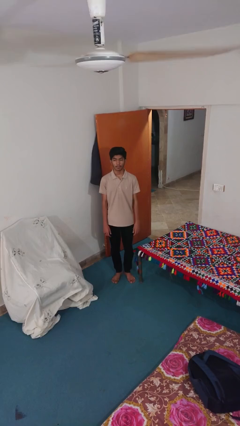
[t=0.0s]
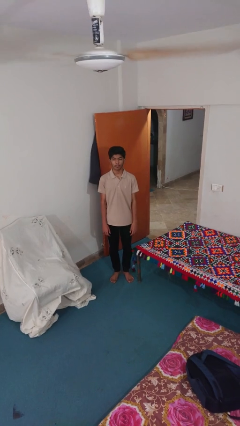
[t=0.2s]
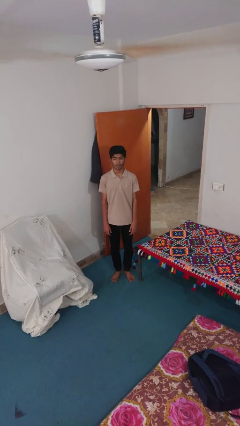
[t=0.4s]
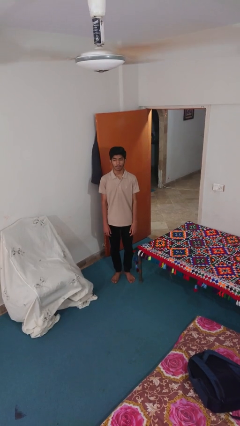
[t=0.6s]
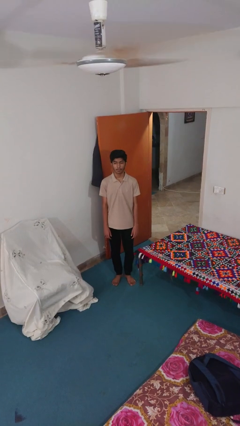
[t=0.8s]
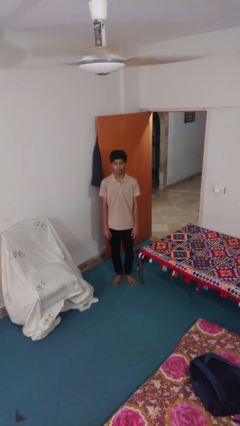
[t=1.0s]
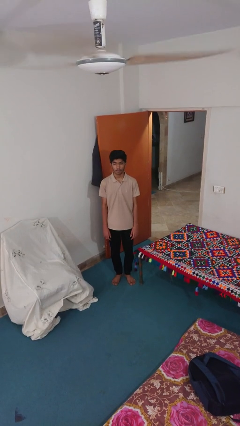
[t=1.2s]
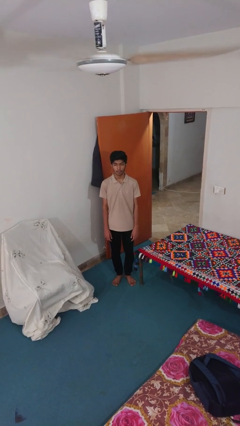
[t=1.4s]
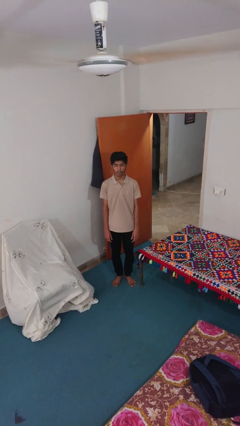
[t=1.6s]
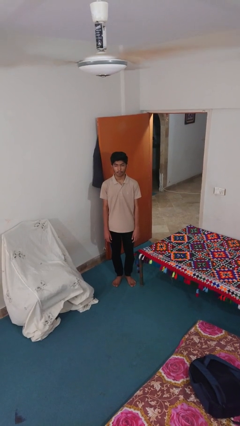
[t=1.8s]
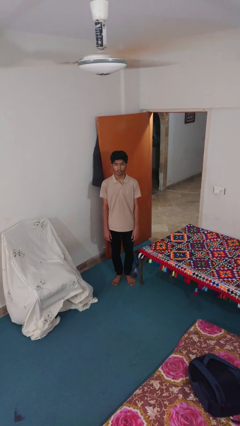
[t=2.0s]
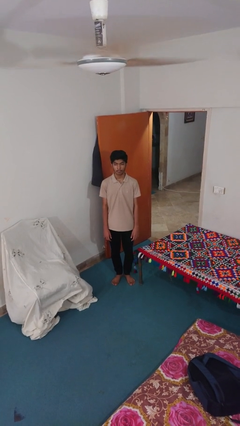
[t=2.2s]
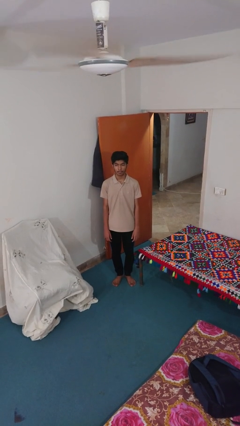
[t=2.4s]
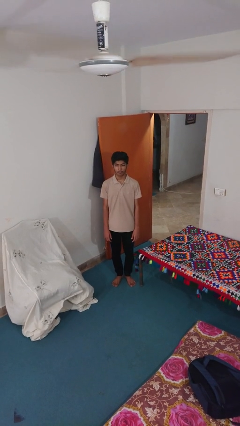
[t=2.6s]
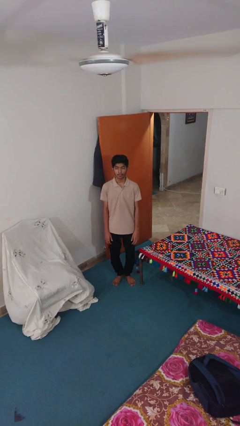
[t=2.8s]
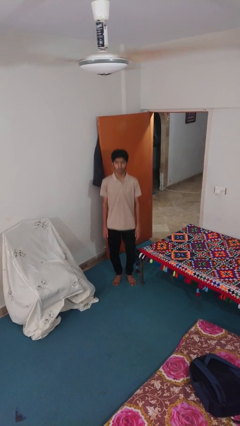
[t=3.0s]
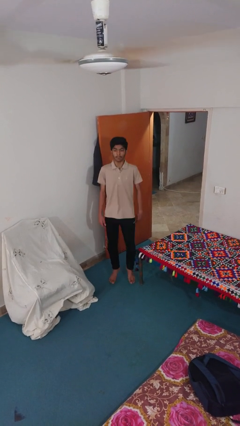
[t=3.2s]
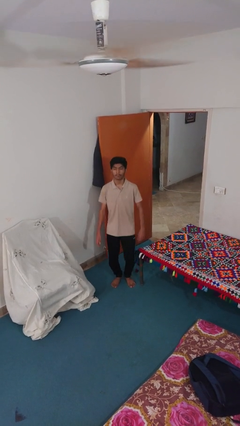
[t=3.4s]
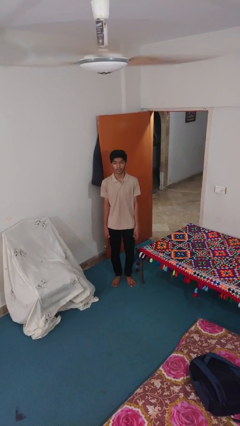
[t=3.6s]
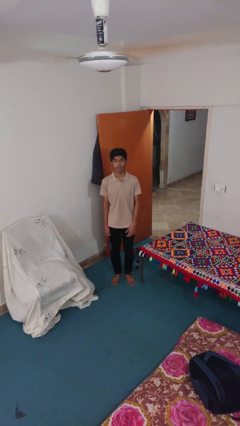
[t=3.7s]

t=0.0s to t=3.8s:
person jumps

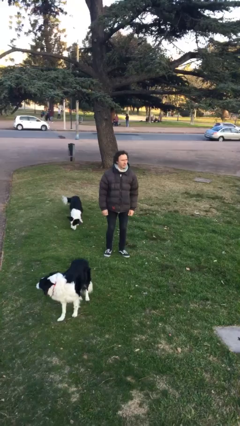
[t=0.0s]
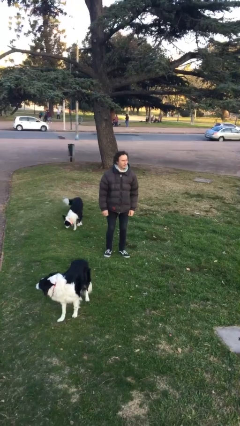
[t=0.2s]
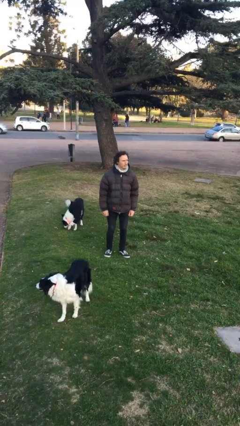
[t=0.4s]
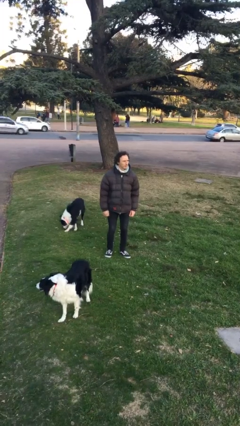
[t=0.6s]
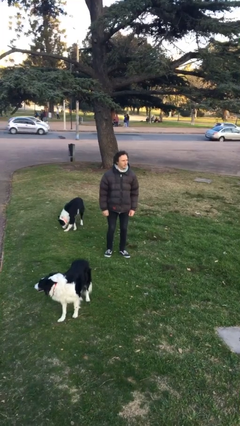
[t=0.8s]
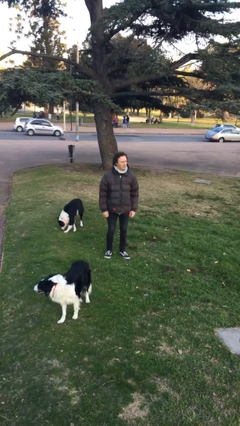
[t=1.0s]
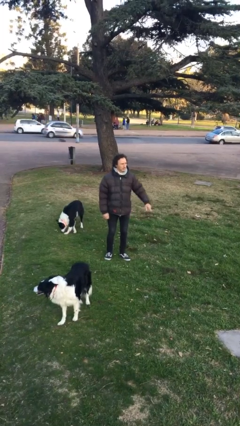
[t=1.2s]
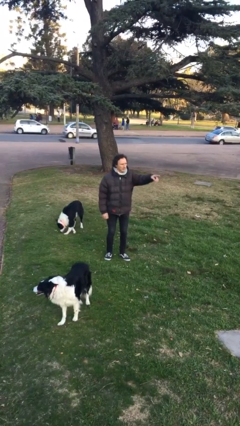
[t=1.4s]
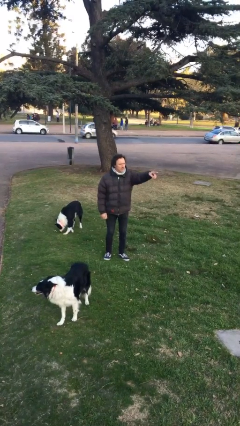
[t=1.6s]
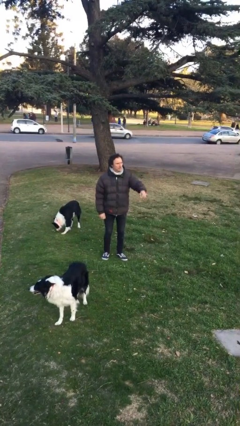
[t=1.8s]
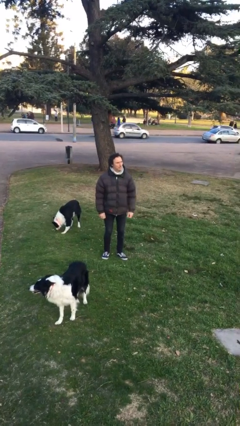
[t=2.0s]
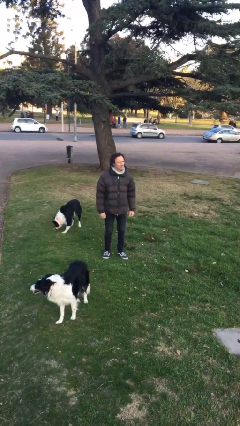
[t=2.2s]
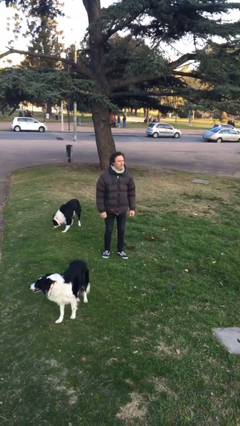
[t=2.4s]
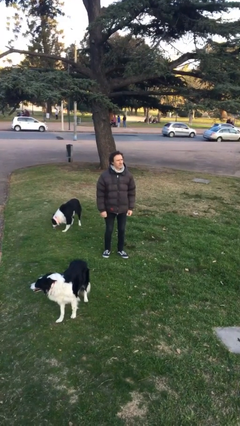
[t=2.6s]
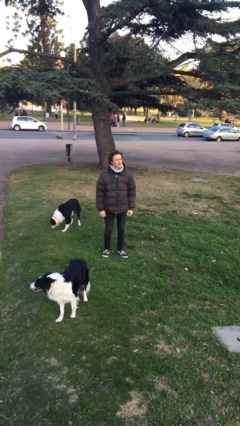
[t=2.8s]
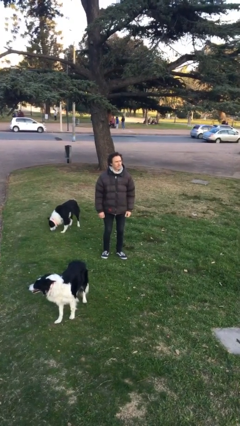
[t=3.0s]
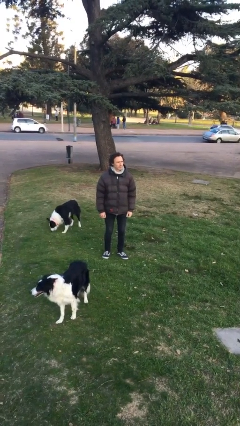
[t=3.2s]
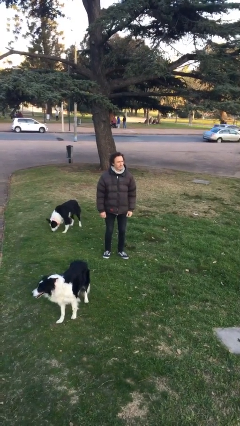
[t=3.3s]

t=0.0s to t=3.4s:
person points at person

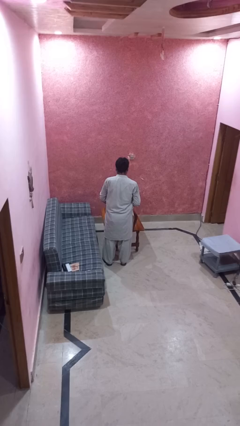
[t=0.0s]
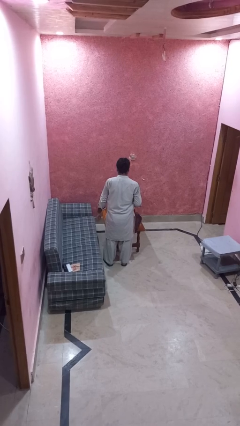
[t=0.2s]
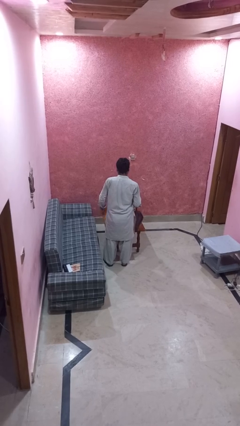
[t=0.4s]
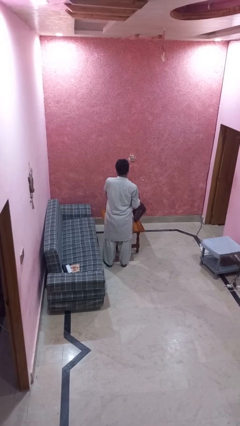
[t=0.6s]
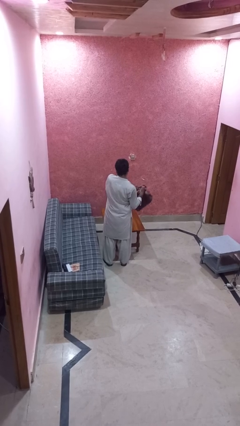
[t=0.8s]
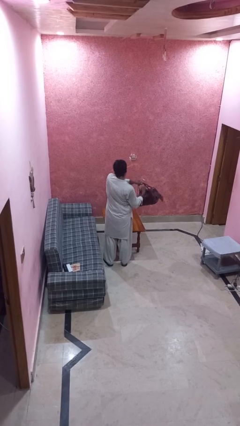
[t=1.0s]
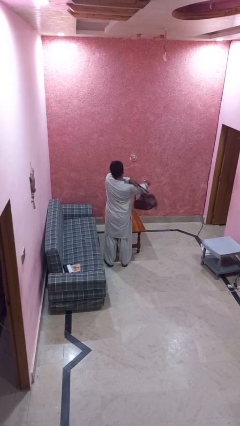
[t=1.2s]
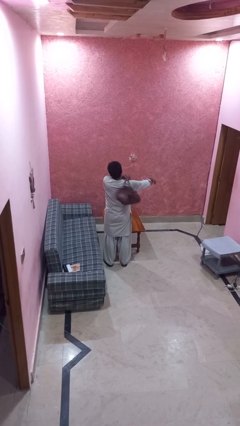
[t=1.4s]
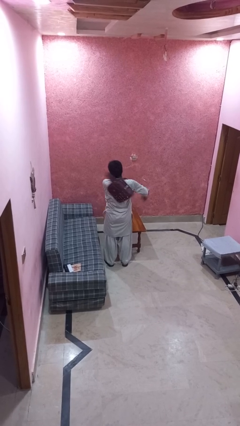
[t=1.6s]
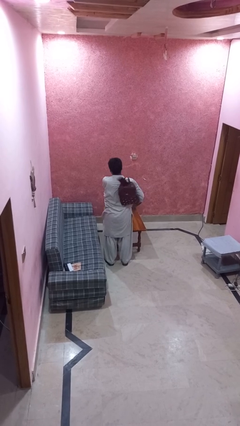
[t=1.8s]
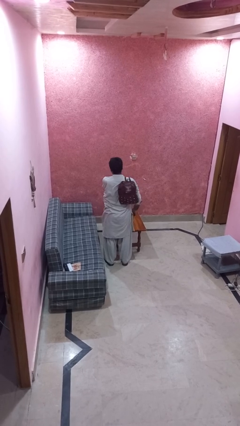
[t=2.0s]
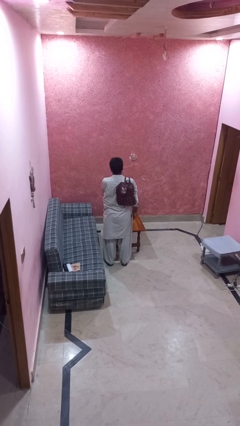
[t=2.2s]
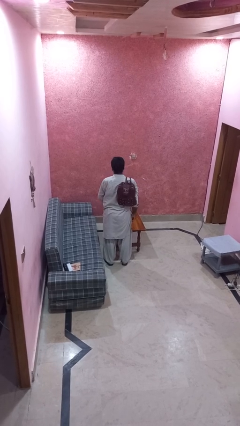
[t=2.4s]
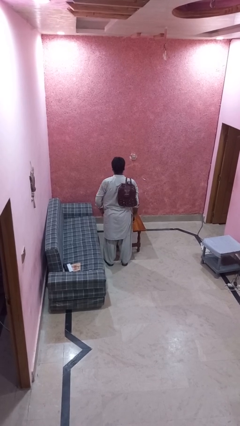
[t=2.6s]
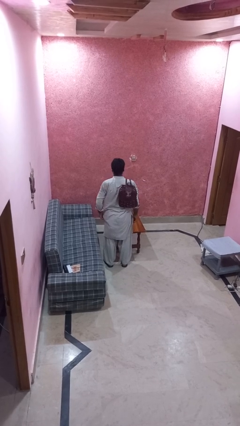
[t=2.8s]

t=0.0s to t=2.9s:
person puts on backpack

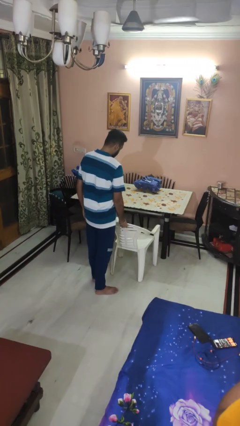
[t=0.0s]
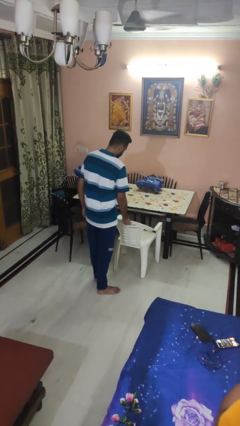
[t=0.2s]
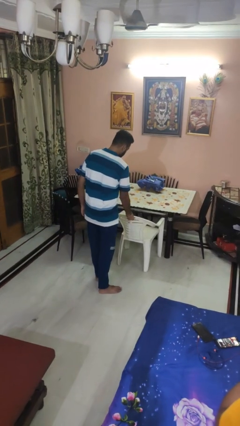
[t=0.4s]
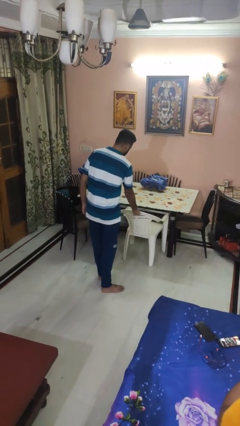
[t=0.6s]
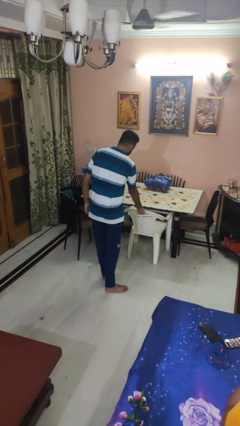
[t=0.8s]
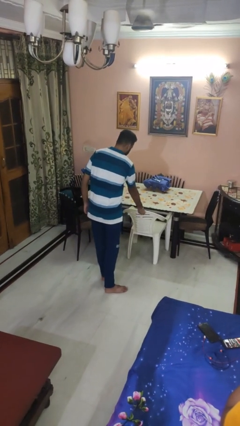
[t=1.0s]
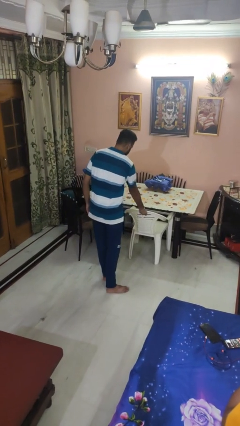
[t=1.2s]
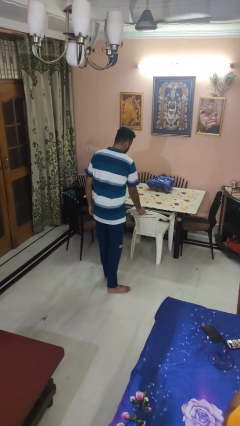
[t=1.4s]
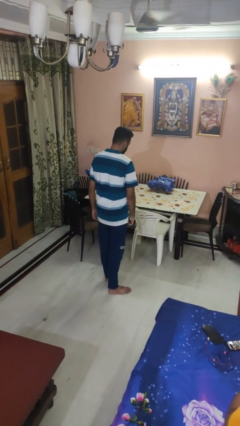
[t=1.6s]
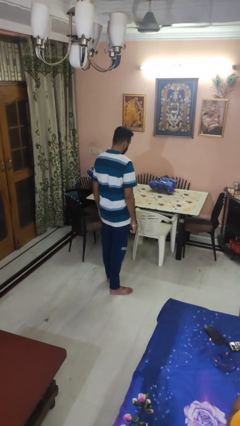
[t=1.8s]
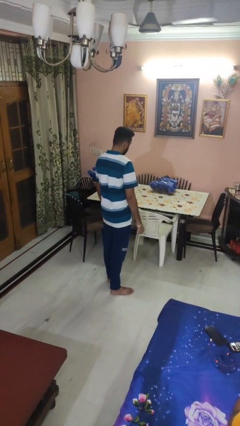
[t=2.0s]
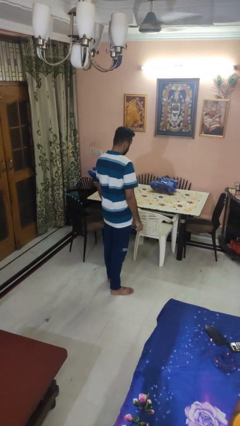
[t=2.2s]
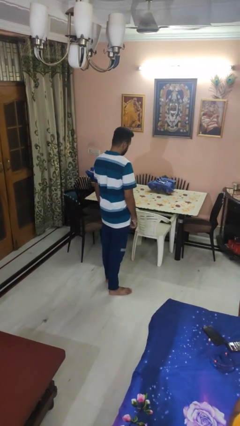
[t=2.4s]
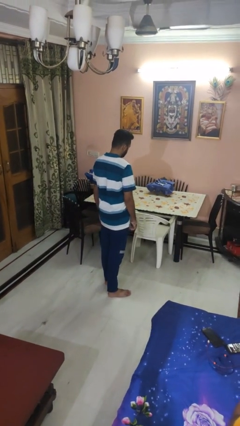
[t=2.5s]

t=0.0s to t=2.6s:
person pushes in chair

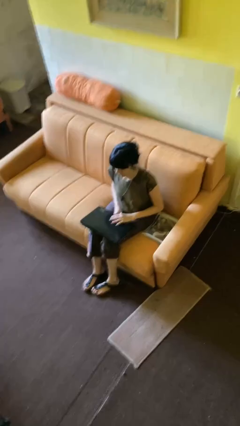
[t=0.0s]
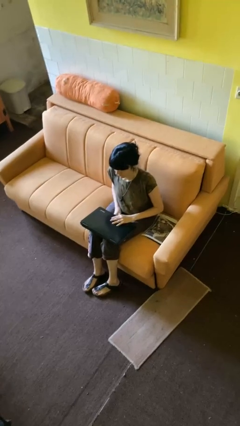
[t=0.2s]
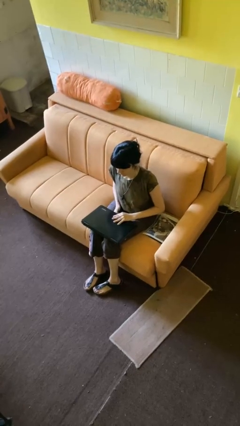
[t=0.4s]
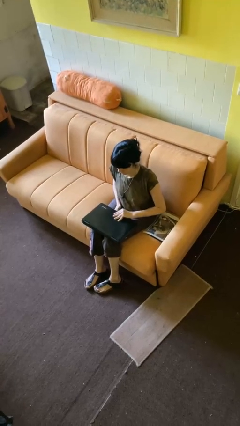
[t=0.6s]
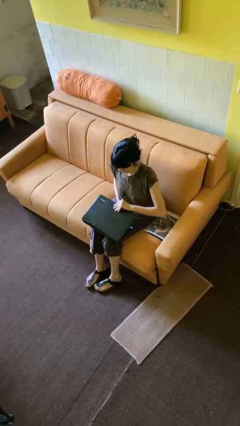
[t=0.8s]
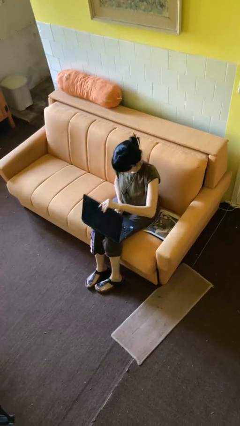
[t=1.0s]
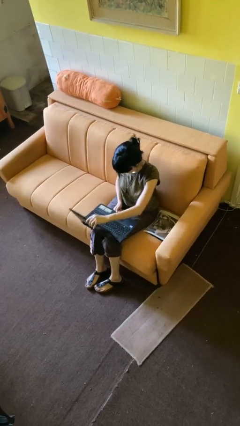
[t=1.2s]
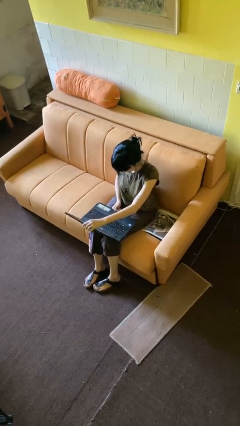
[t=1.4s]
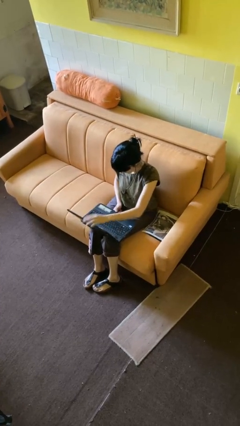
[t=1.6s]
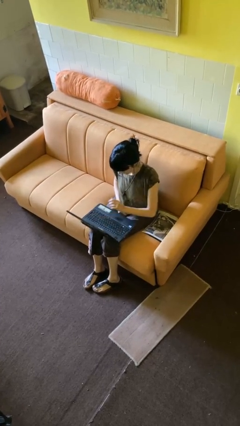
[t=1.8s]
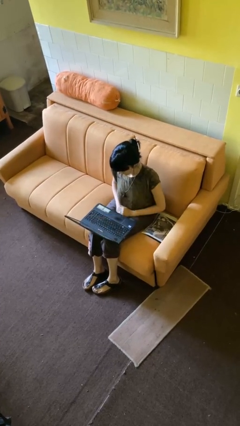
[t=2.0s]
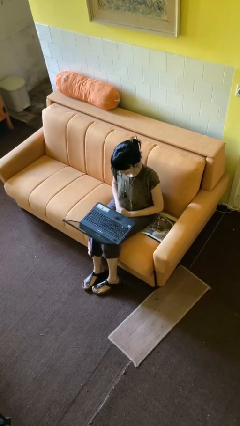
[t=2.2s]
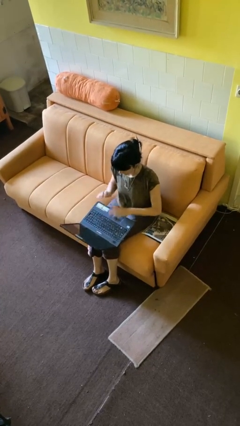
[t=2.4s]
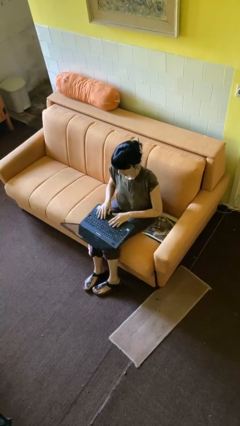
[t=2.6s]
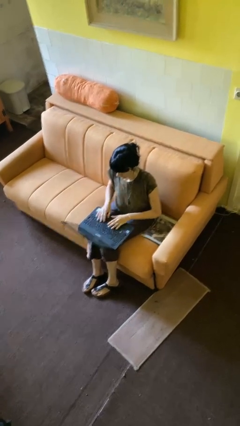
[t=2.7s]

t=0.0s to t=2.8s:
person opens laptop

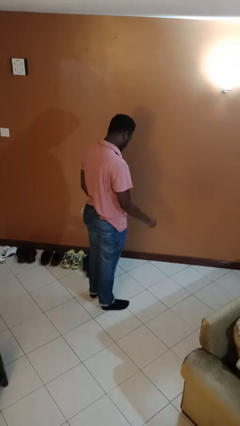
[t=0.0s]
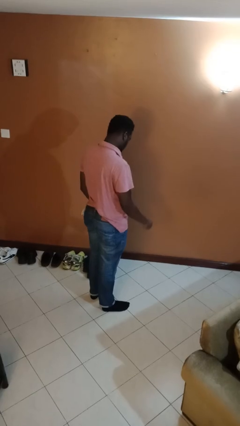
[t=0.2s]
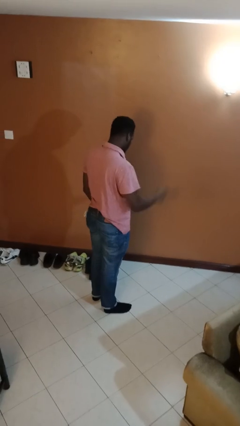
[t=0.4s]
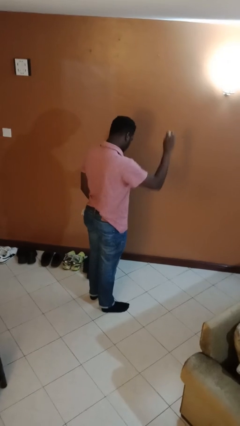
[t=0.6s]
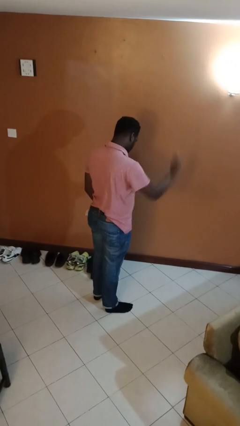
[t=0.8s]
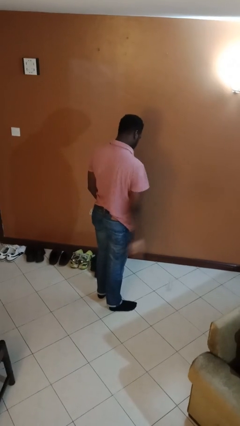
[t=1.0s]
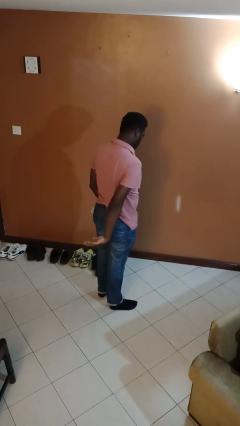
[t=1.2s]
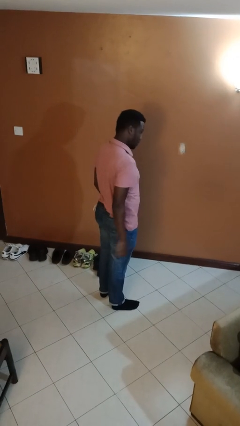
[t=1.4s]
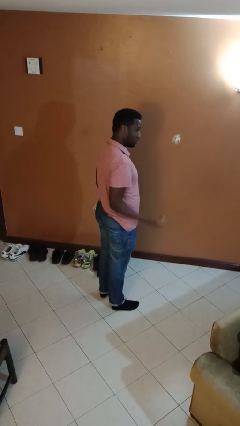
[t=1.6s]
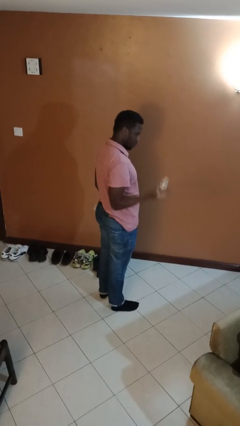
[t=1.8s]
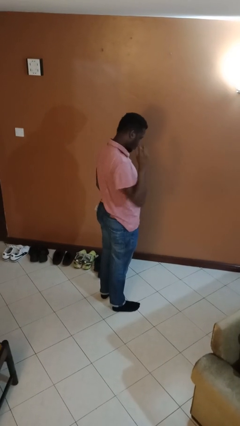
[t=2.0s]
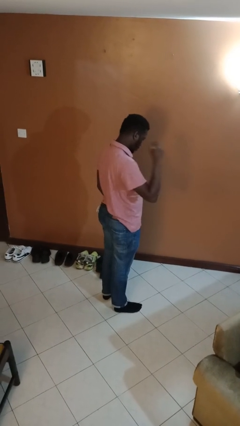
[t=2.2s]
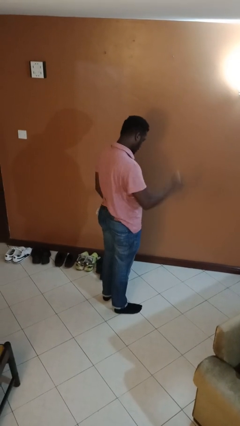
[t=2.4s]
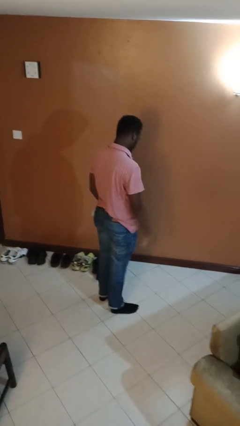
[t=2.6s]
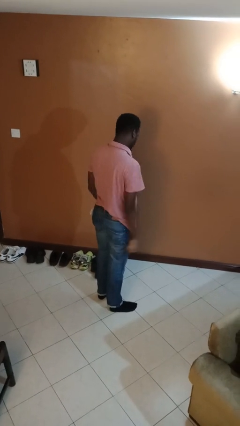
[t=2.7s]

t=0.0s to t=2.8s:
person bounces ball on floor
